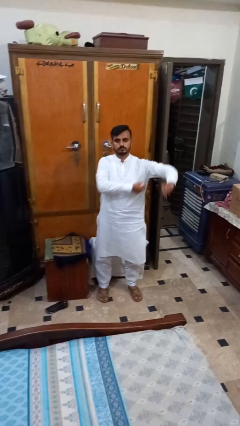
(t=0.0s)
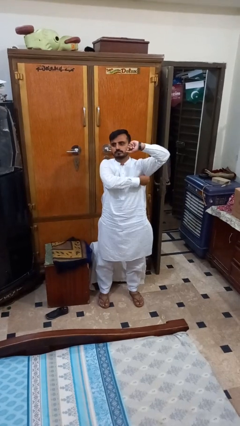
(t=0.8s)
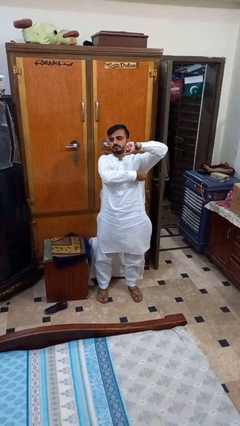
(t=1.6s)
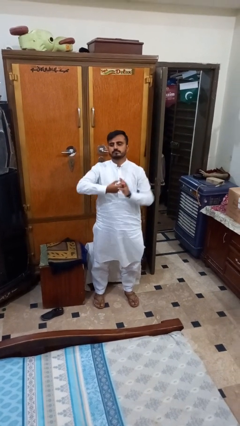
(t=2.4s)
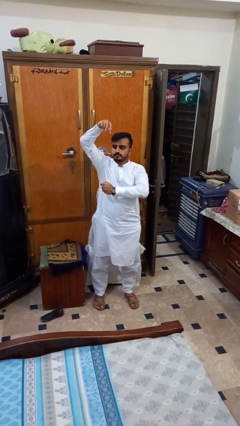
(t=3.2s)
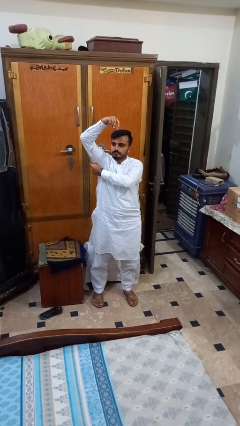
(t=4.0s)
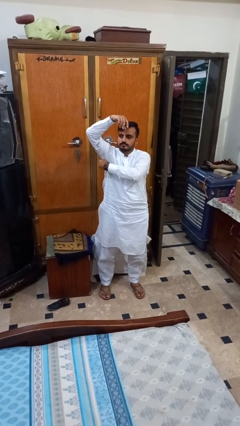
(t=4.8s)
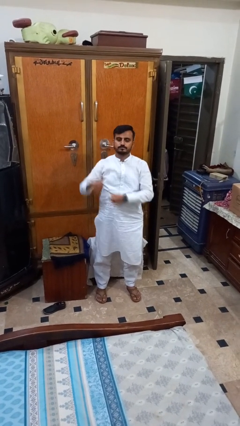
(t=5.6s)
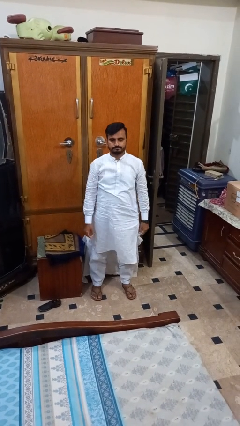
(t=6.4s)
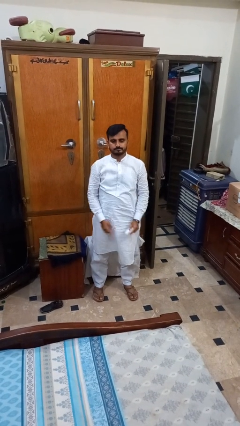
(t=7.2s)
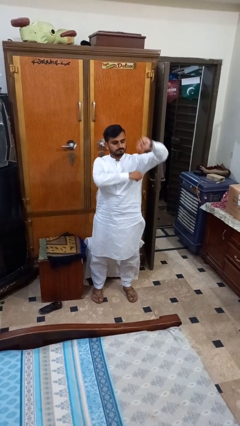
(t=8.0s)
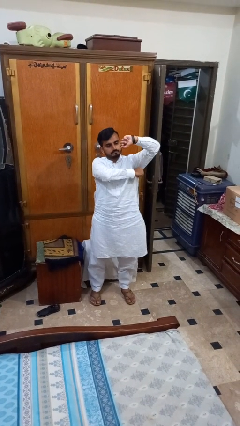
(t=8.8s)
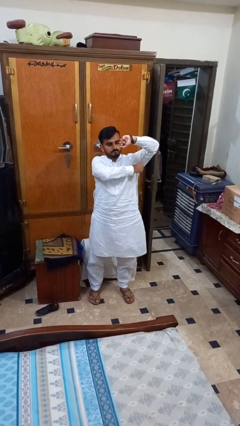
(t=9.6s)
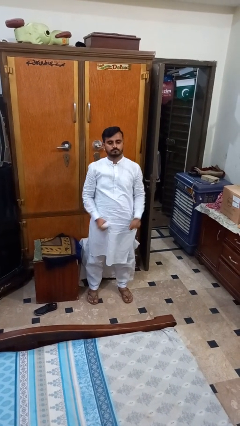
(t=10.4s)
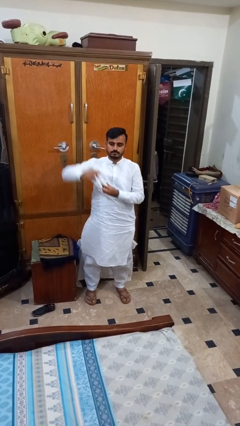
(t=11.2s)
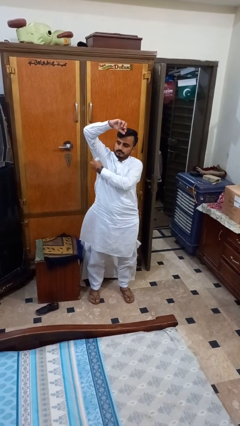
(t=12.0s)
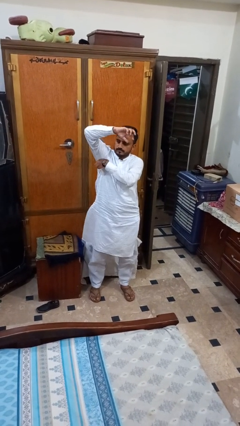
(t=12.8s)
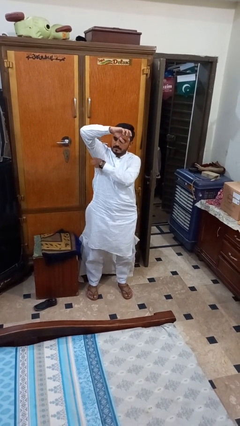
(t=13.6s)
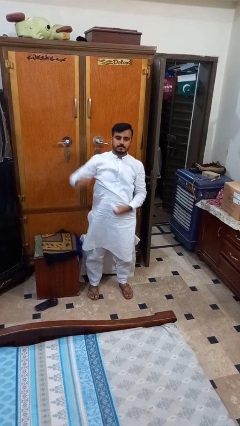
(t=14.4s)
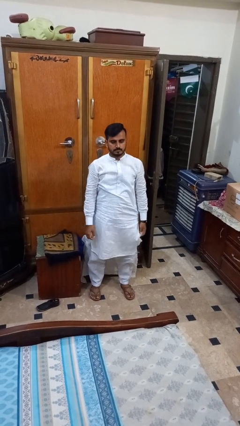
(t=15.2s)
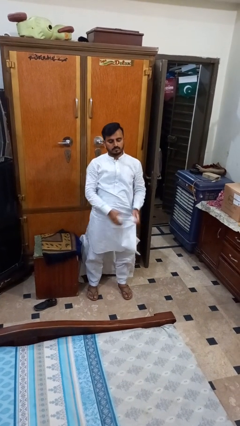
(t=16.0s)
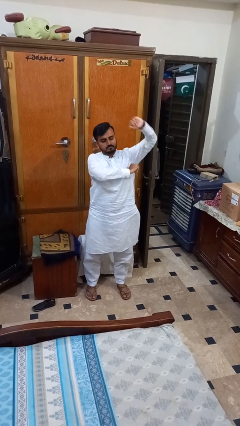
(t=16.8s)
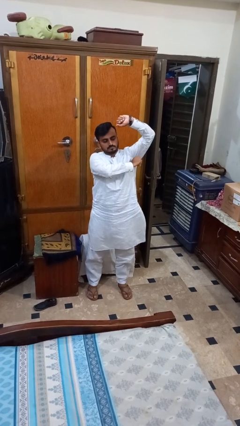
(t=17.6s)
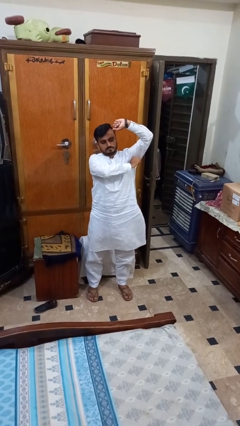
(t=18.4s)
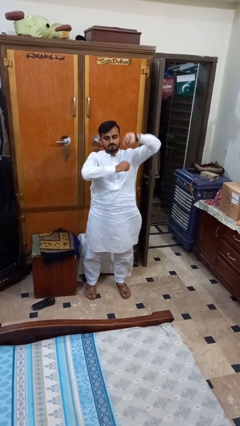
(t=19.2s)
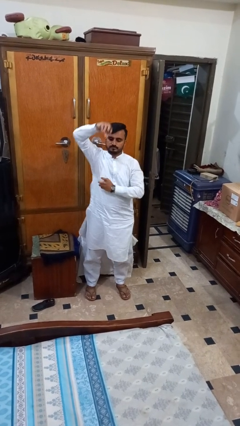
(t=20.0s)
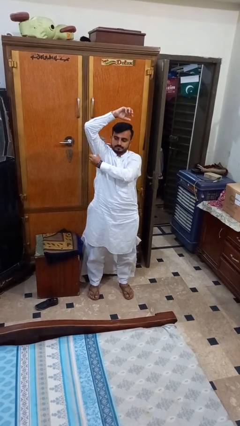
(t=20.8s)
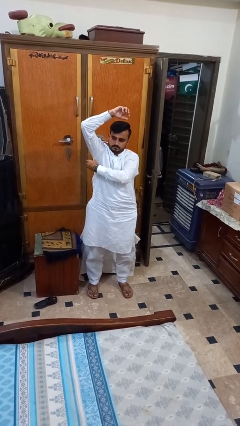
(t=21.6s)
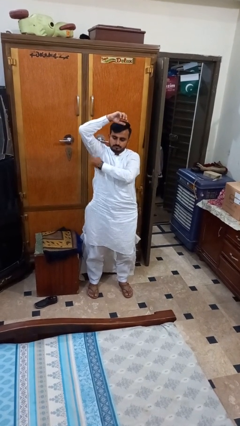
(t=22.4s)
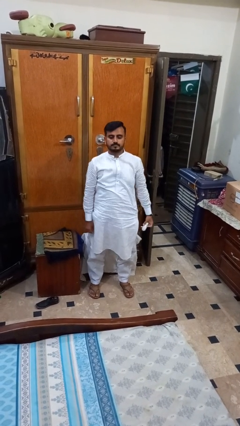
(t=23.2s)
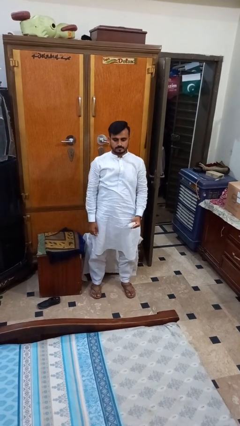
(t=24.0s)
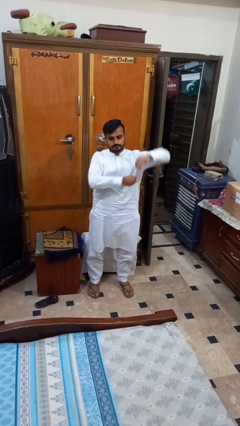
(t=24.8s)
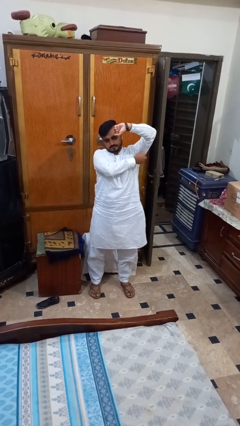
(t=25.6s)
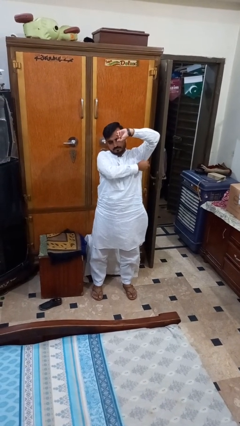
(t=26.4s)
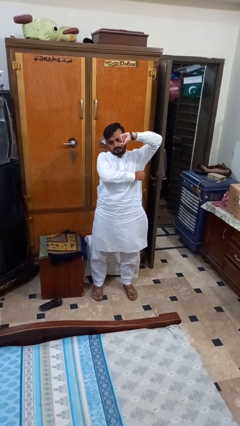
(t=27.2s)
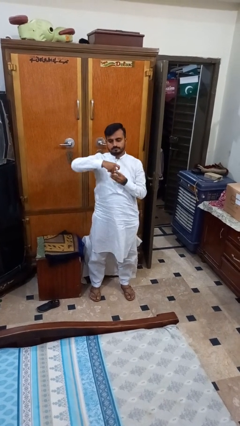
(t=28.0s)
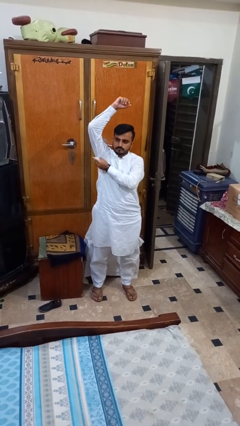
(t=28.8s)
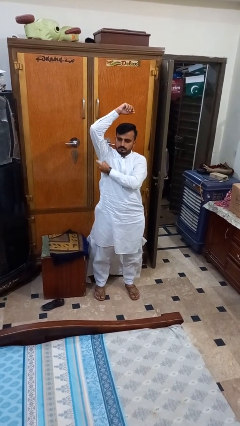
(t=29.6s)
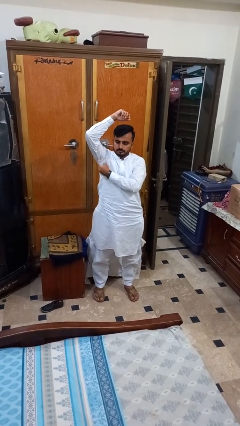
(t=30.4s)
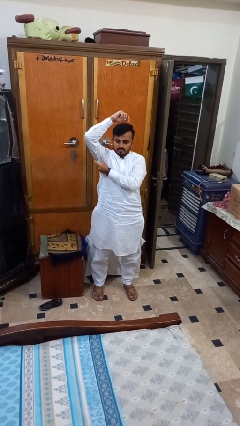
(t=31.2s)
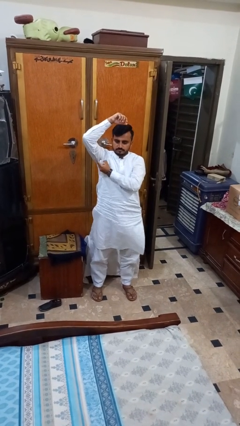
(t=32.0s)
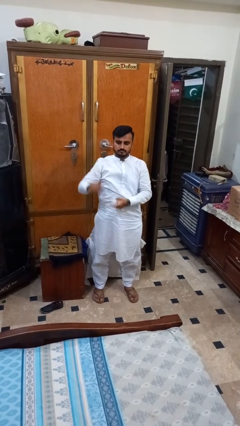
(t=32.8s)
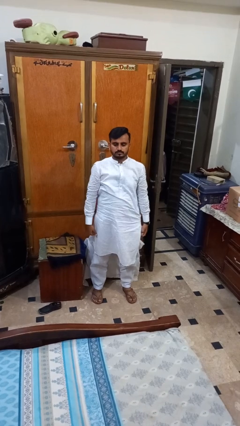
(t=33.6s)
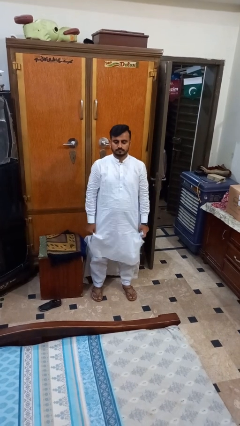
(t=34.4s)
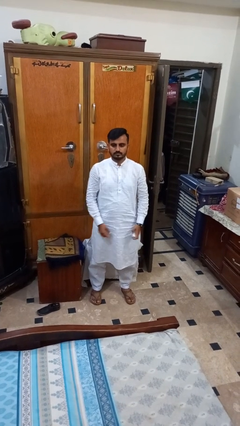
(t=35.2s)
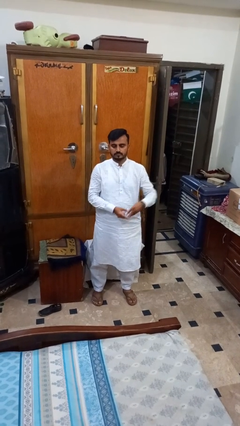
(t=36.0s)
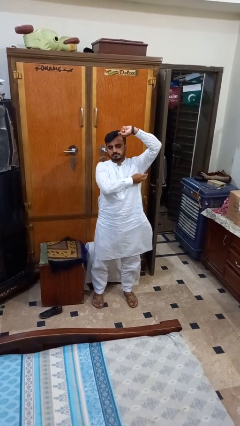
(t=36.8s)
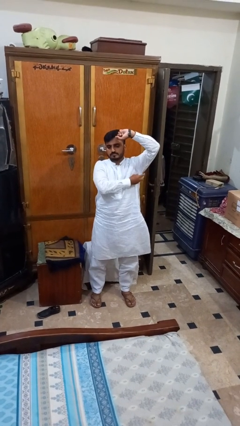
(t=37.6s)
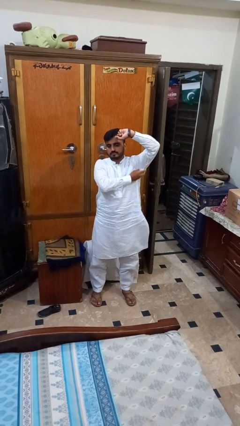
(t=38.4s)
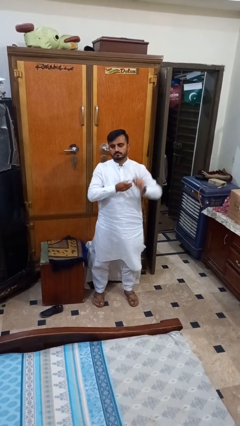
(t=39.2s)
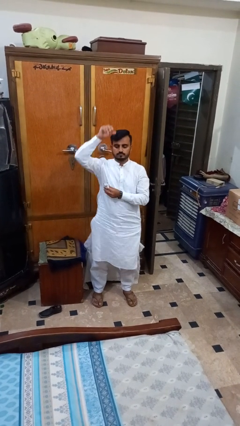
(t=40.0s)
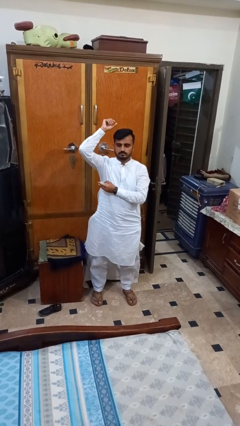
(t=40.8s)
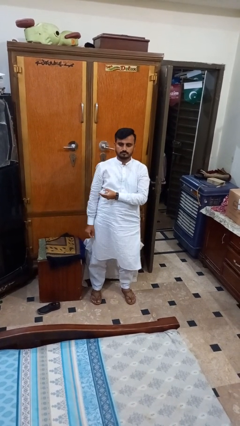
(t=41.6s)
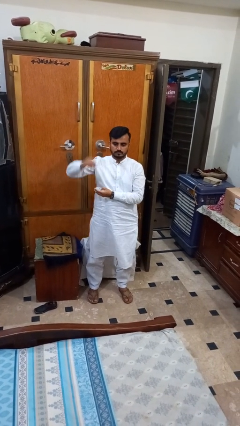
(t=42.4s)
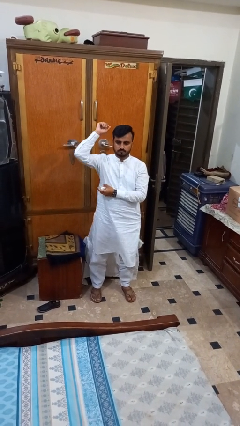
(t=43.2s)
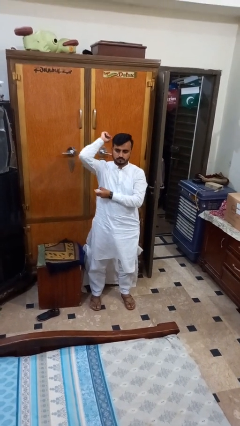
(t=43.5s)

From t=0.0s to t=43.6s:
person applies deodorant

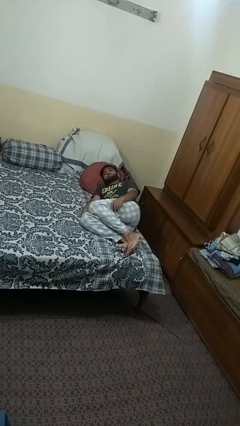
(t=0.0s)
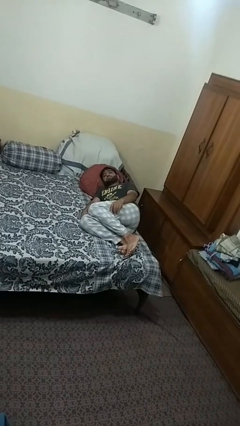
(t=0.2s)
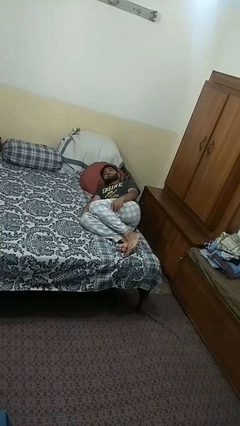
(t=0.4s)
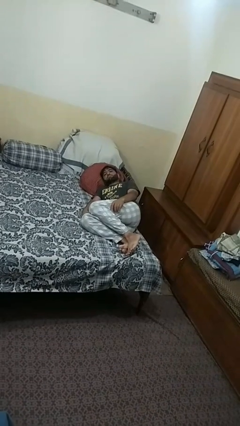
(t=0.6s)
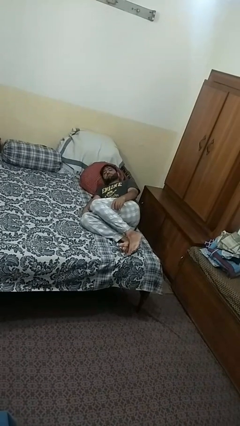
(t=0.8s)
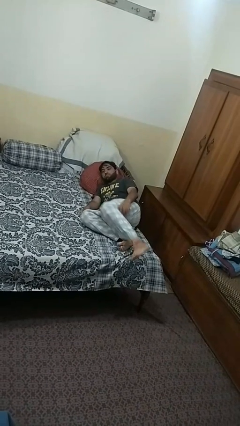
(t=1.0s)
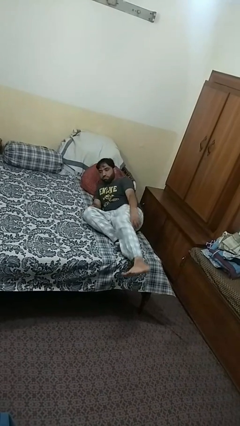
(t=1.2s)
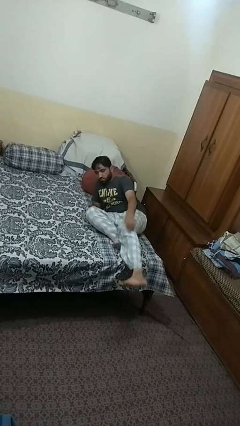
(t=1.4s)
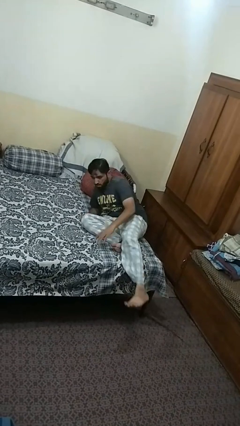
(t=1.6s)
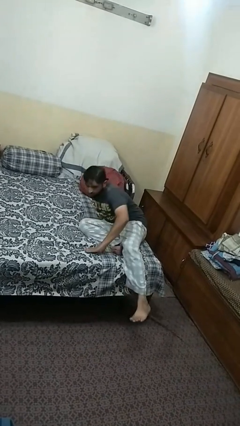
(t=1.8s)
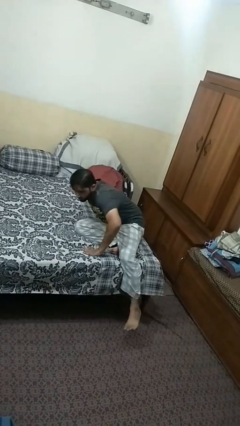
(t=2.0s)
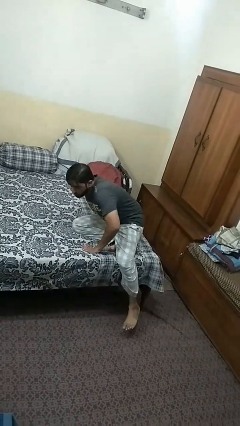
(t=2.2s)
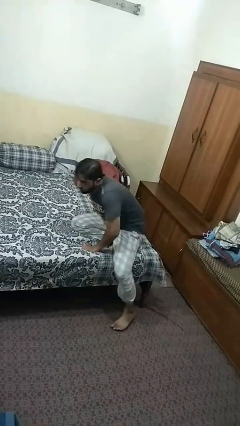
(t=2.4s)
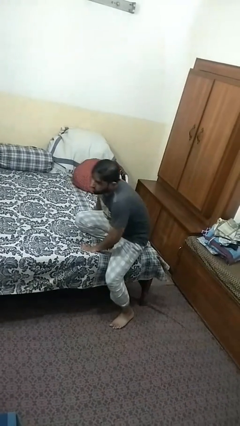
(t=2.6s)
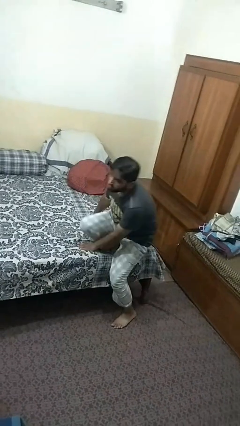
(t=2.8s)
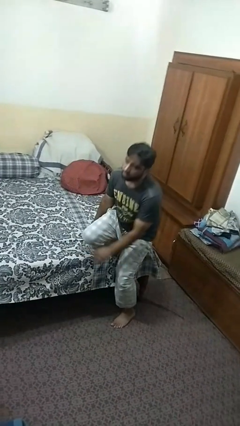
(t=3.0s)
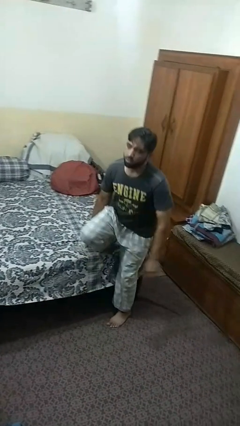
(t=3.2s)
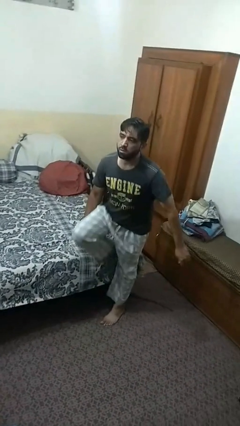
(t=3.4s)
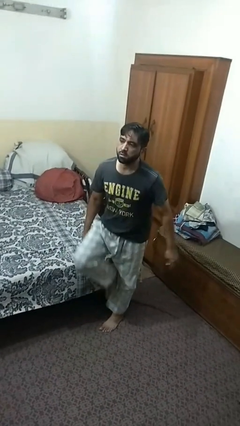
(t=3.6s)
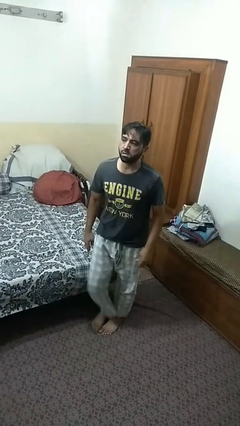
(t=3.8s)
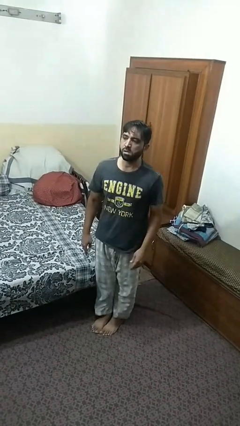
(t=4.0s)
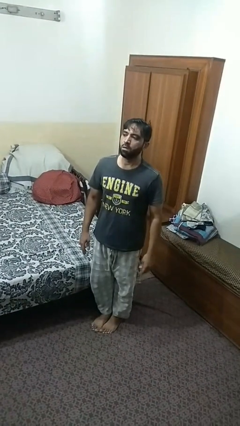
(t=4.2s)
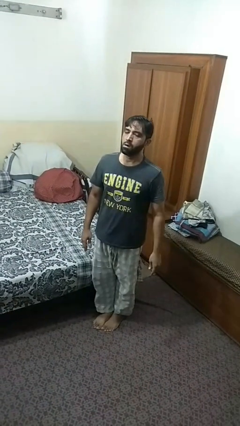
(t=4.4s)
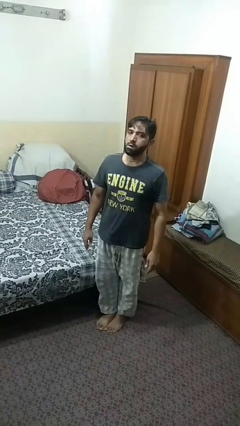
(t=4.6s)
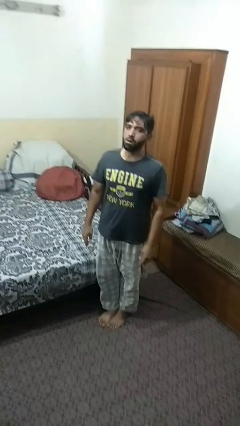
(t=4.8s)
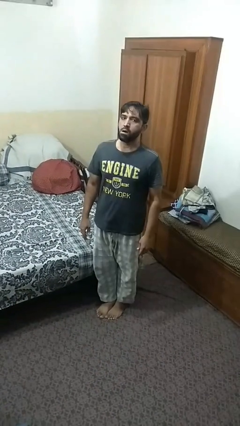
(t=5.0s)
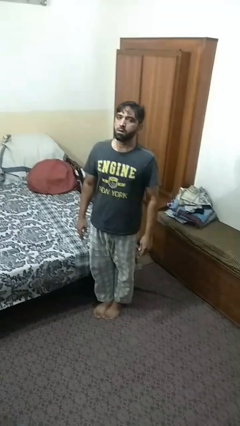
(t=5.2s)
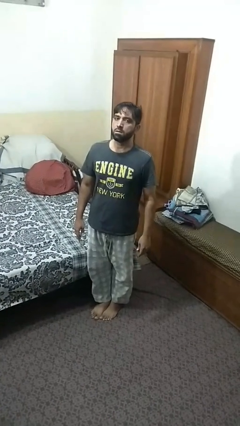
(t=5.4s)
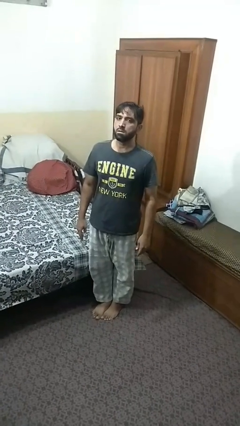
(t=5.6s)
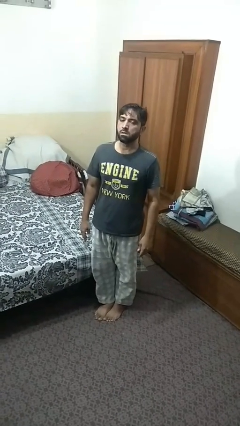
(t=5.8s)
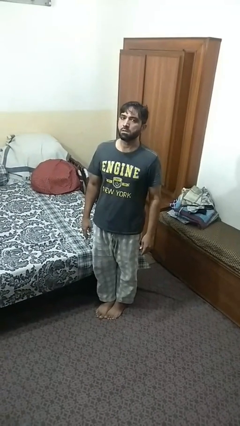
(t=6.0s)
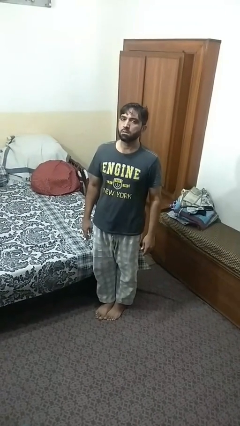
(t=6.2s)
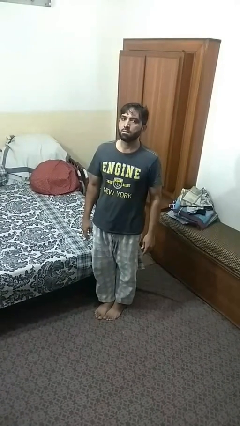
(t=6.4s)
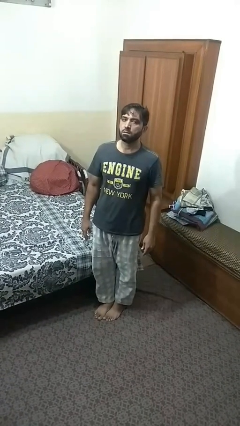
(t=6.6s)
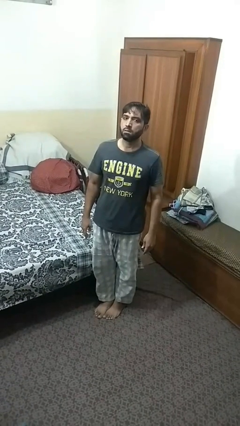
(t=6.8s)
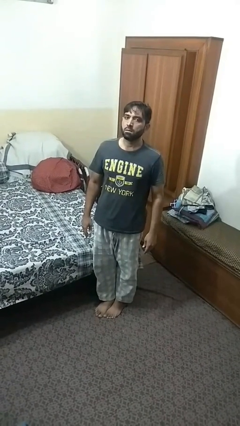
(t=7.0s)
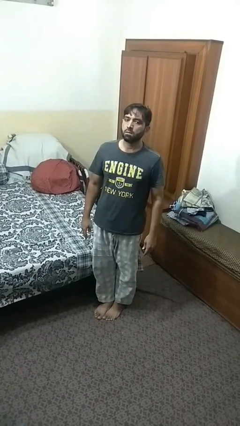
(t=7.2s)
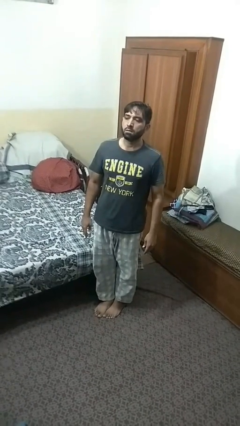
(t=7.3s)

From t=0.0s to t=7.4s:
person stands up
